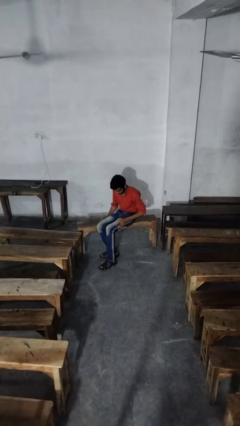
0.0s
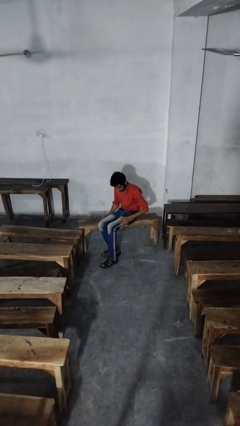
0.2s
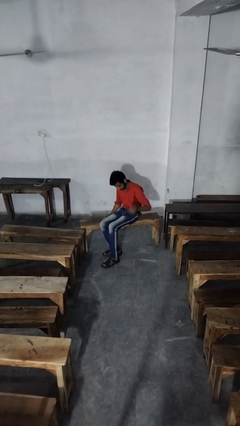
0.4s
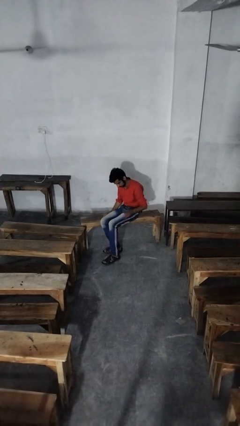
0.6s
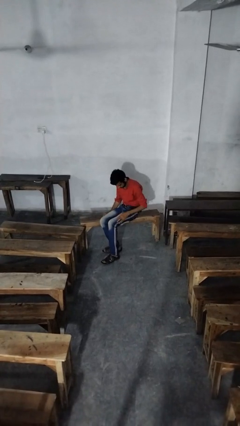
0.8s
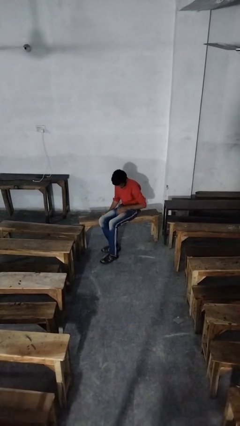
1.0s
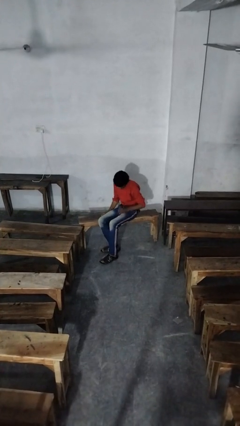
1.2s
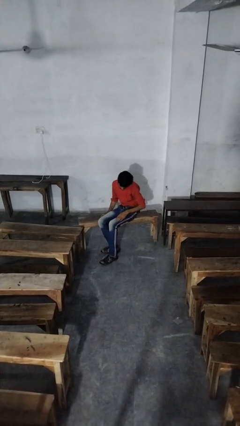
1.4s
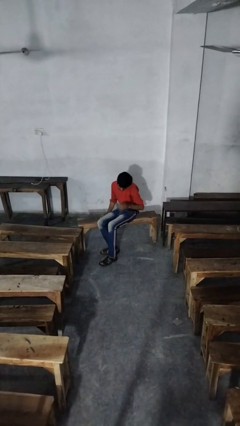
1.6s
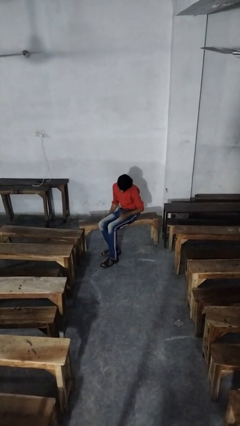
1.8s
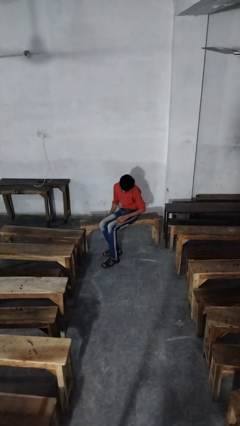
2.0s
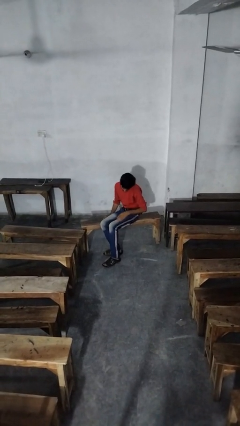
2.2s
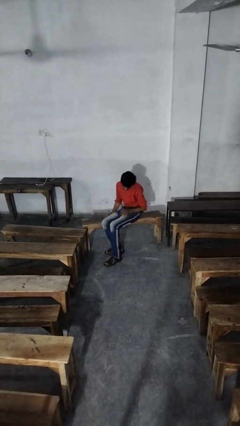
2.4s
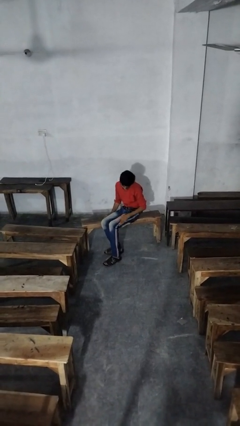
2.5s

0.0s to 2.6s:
person slaps hands on thighs

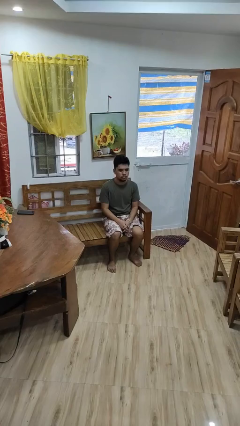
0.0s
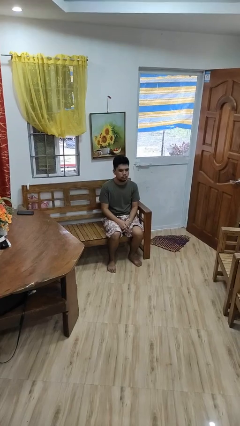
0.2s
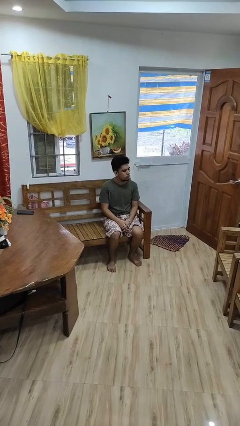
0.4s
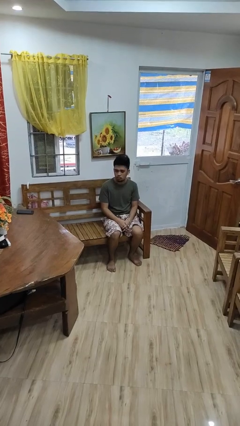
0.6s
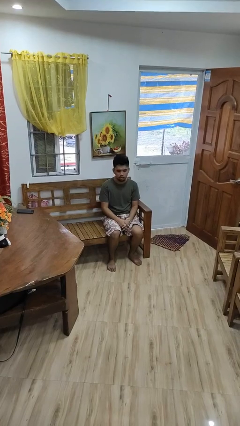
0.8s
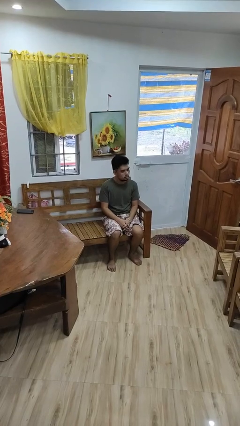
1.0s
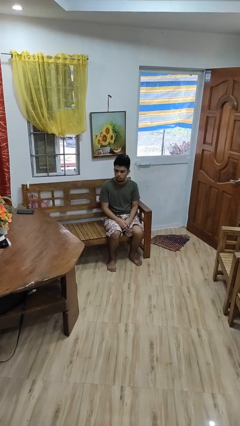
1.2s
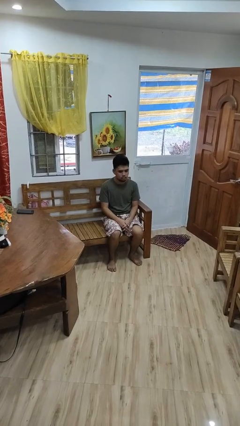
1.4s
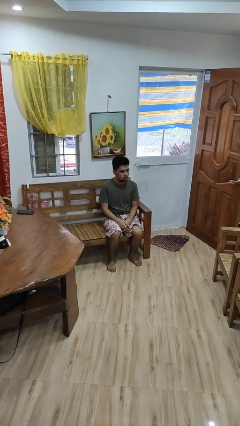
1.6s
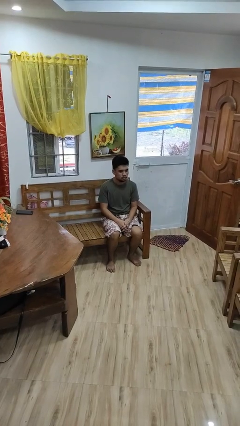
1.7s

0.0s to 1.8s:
person shakes head

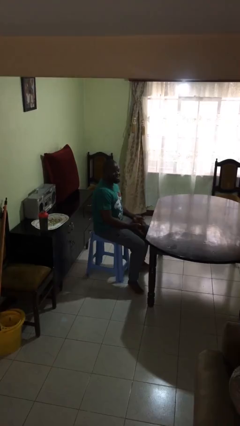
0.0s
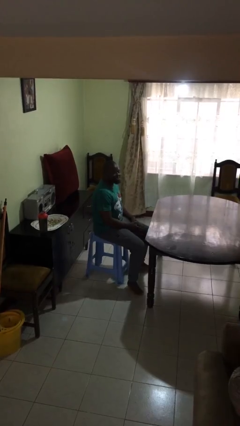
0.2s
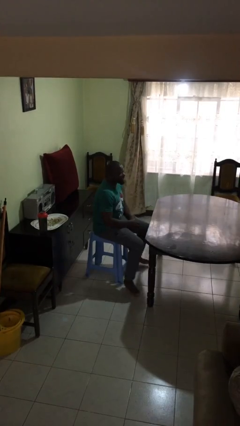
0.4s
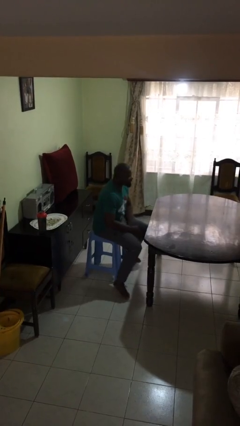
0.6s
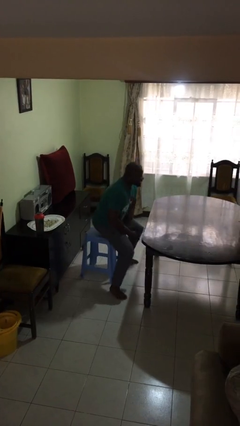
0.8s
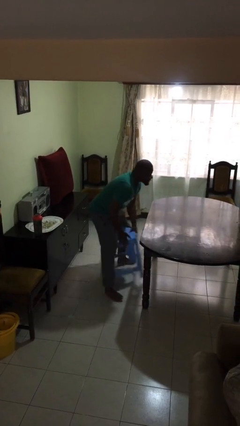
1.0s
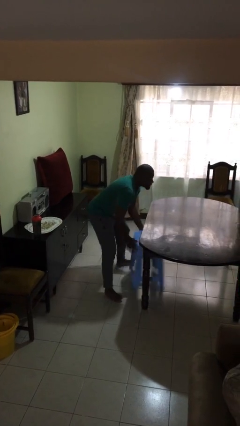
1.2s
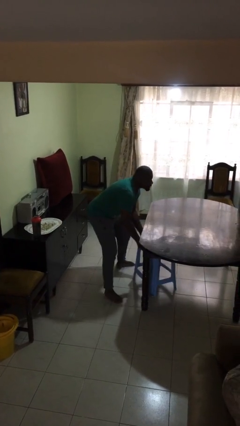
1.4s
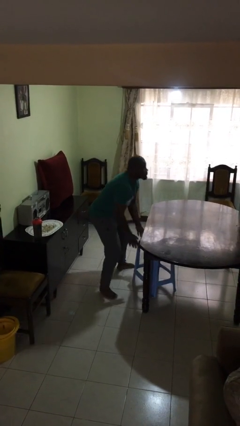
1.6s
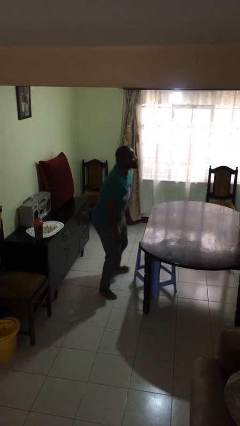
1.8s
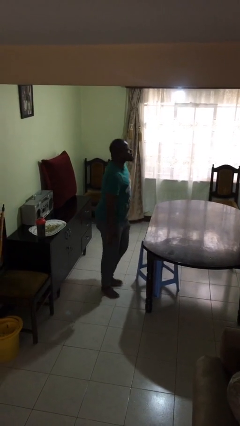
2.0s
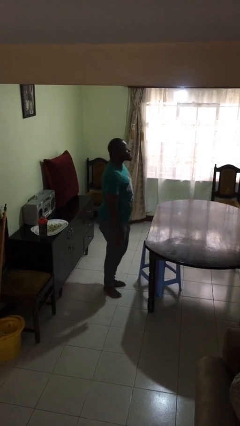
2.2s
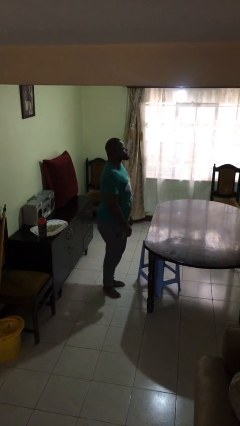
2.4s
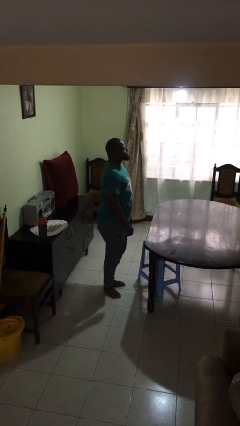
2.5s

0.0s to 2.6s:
person stands up

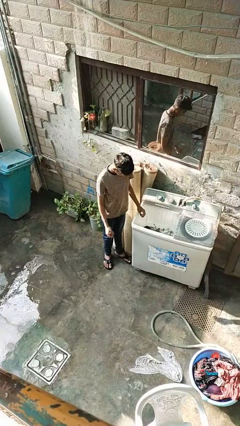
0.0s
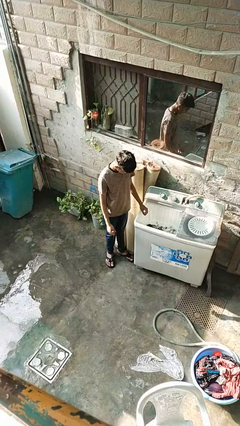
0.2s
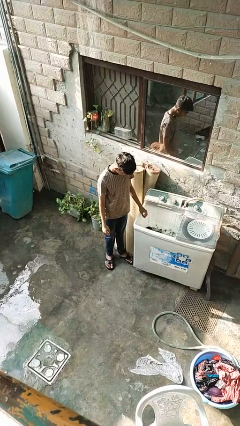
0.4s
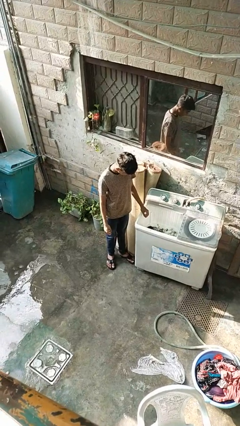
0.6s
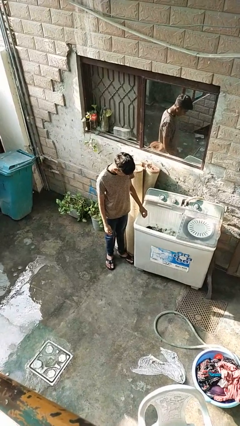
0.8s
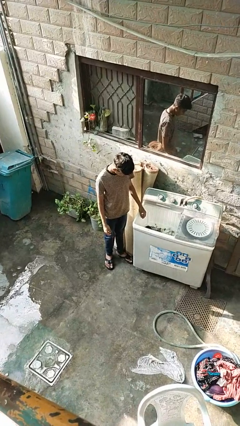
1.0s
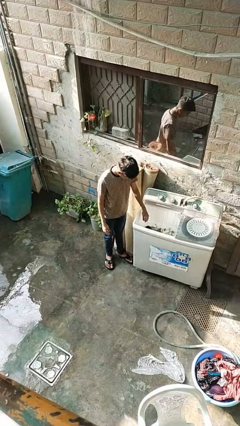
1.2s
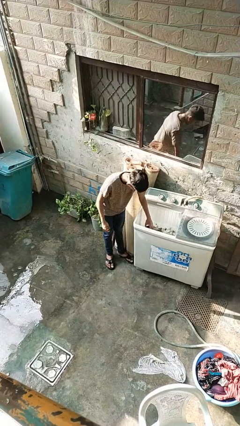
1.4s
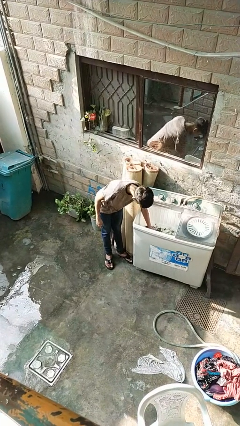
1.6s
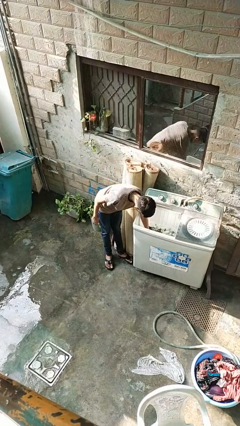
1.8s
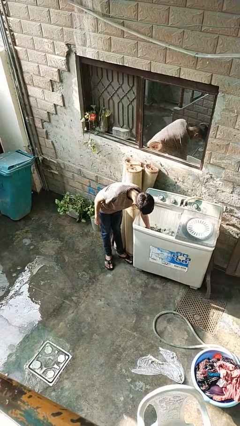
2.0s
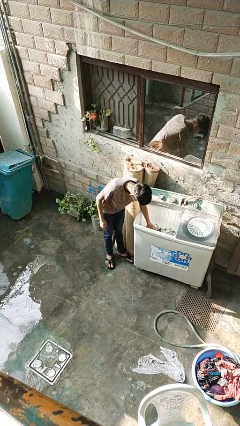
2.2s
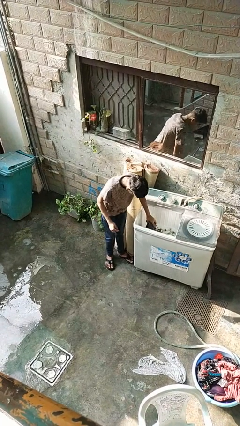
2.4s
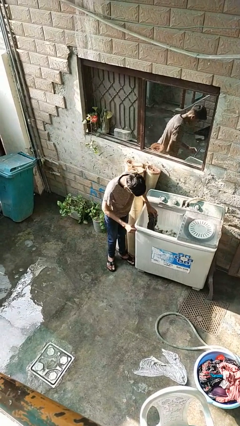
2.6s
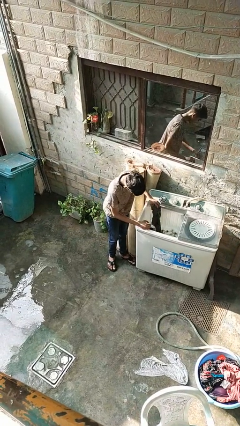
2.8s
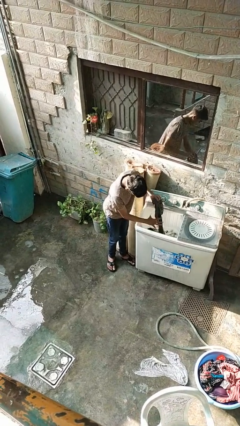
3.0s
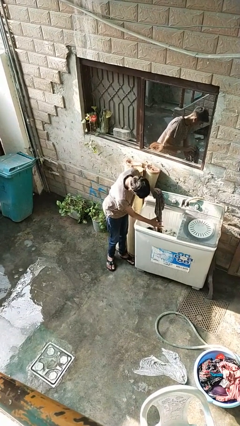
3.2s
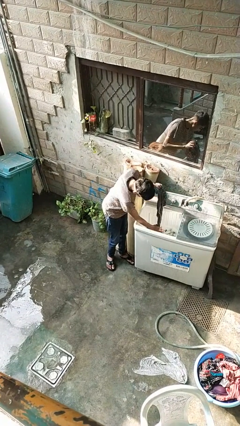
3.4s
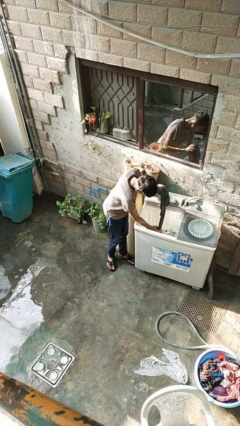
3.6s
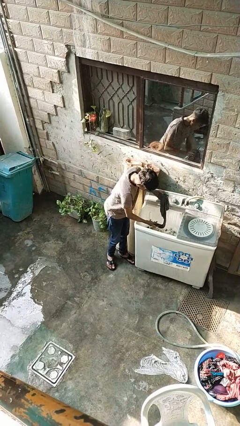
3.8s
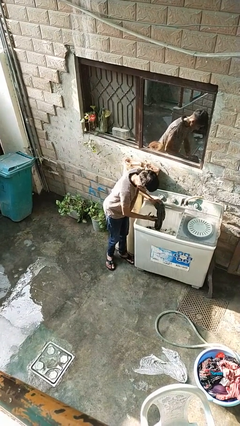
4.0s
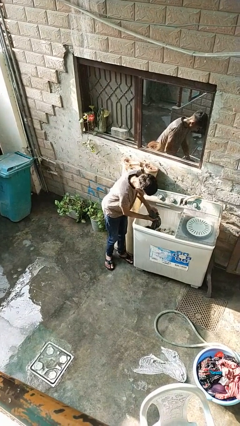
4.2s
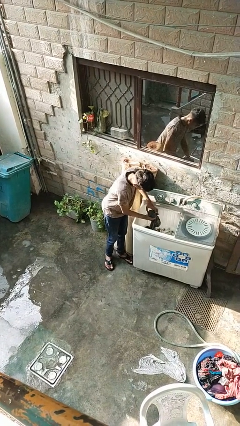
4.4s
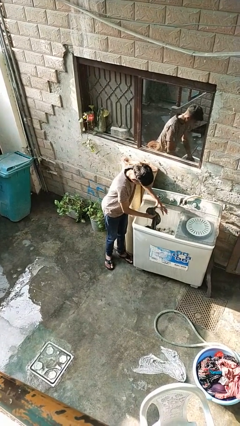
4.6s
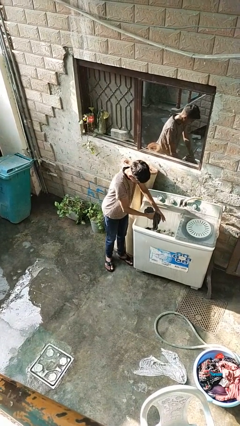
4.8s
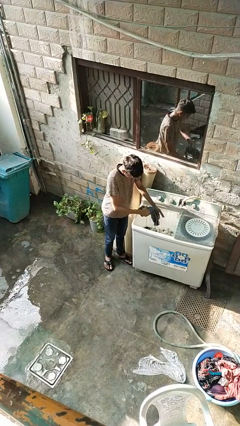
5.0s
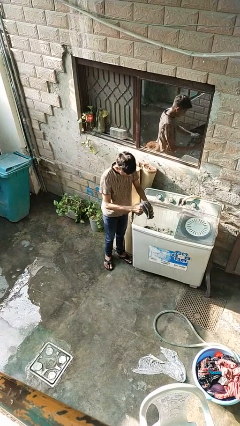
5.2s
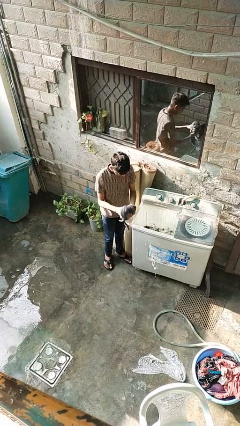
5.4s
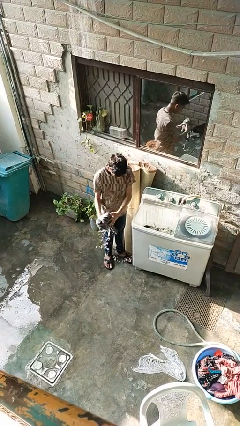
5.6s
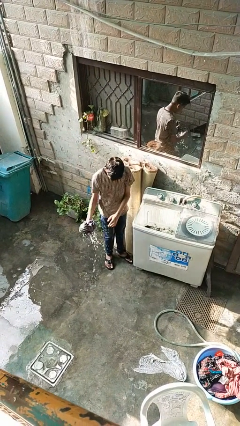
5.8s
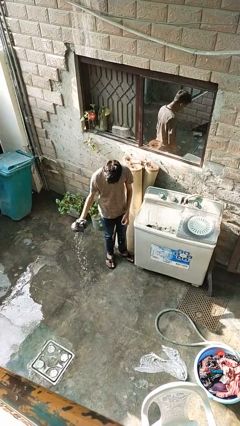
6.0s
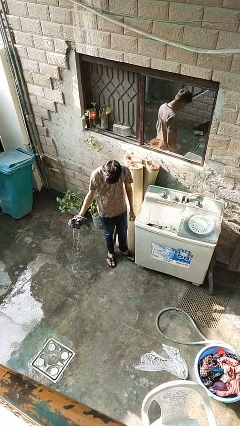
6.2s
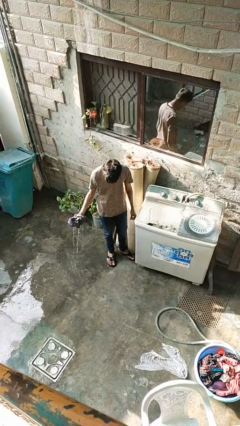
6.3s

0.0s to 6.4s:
person unloads clotheswasher

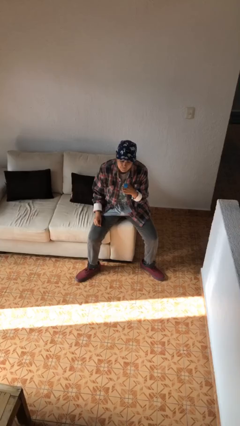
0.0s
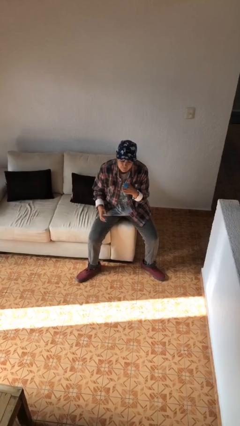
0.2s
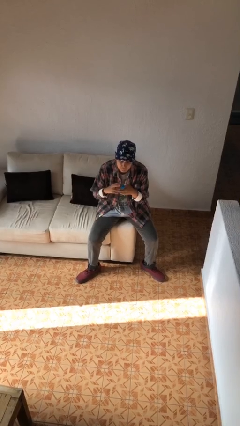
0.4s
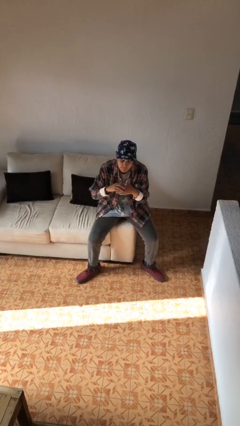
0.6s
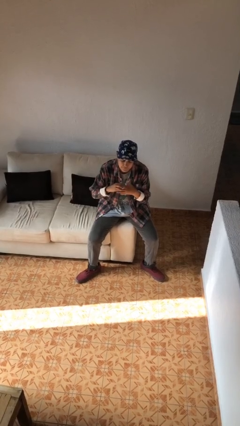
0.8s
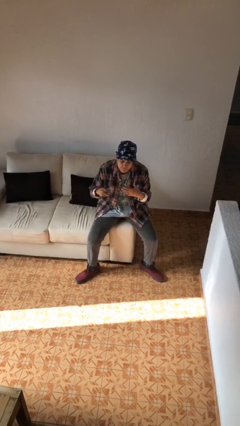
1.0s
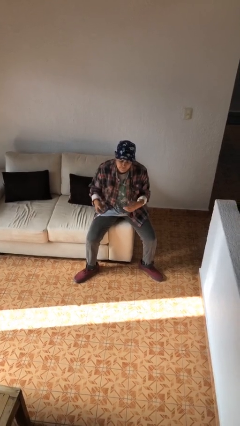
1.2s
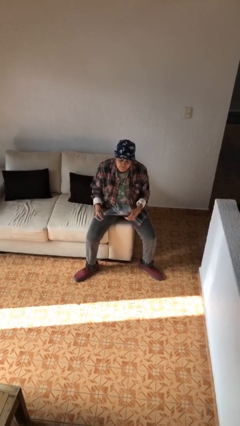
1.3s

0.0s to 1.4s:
person takes off ring

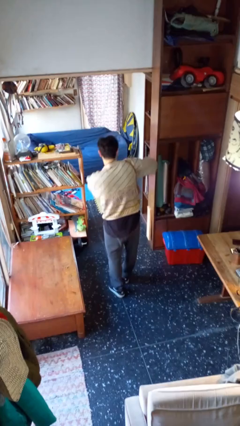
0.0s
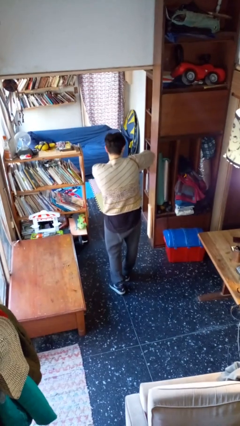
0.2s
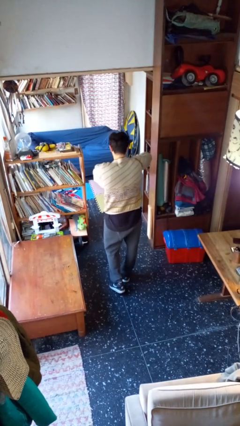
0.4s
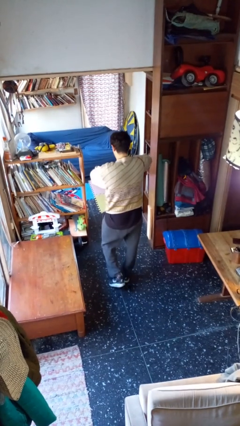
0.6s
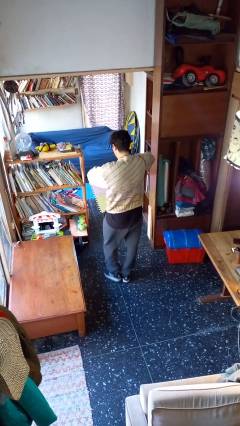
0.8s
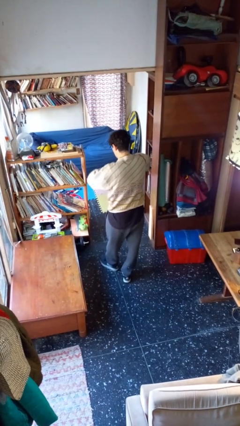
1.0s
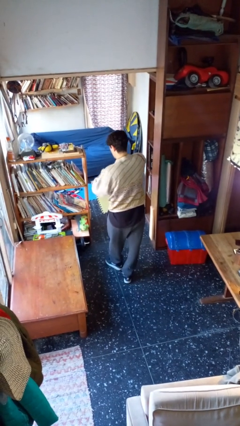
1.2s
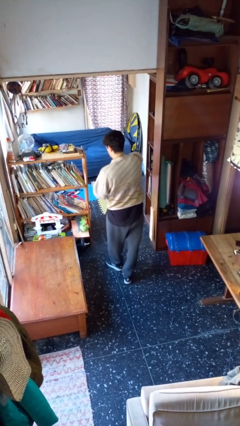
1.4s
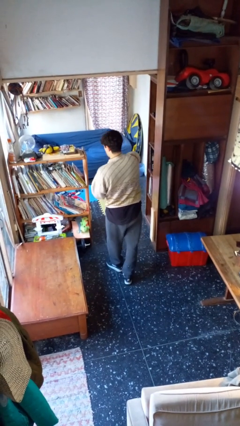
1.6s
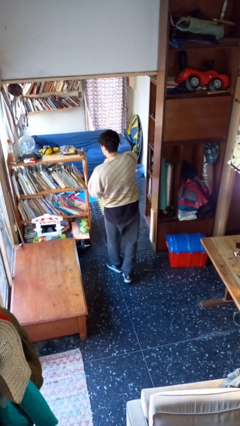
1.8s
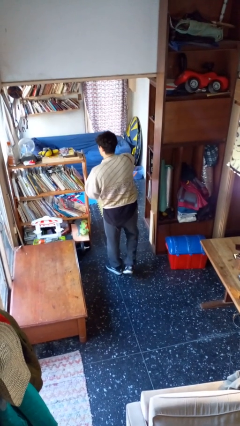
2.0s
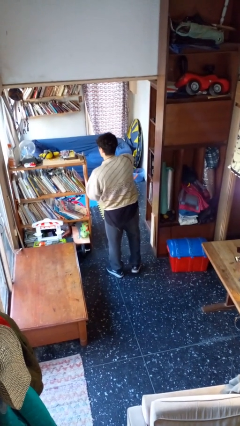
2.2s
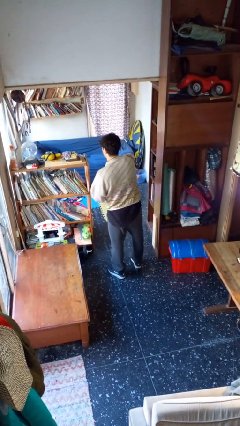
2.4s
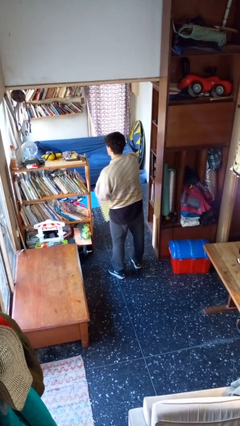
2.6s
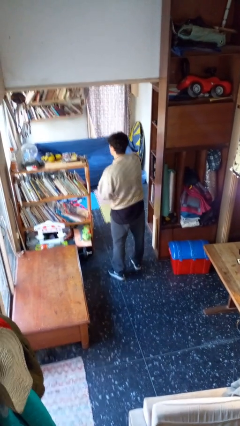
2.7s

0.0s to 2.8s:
person searches in purse
